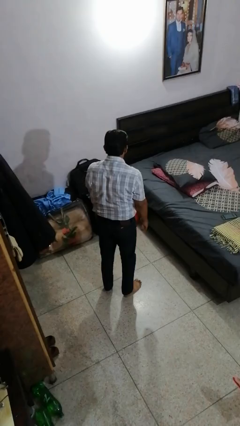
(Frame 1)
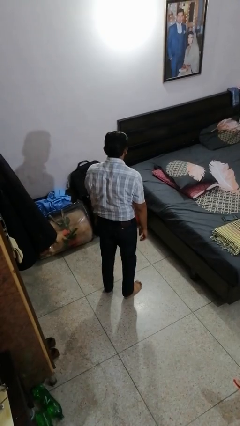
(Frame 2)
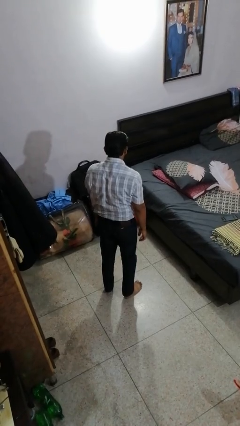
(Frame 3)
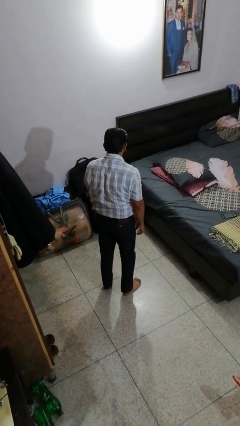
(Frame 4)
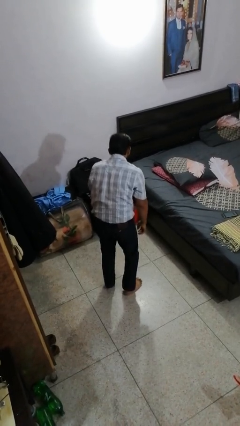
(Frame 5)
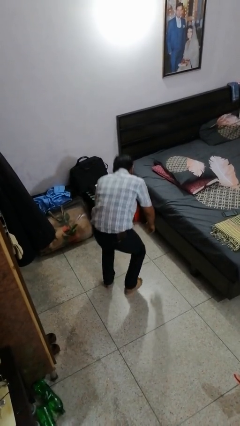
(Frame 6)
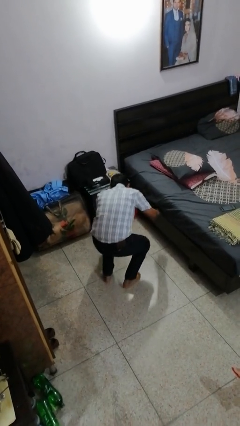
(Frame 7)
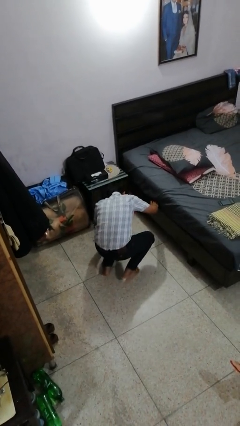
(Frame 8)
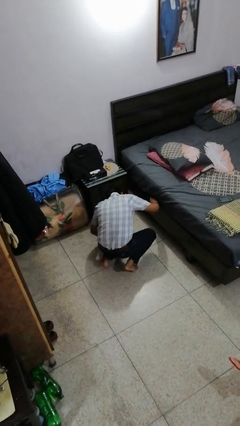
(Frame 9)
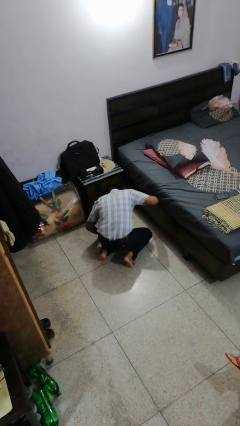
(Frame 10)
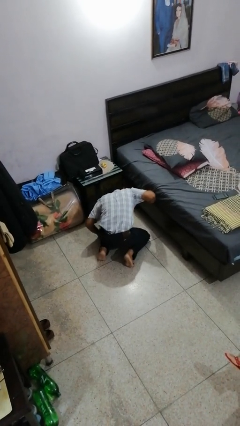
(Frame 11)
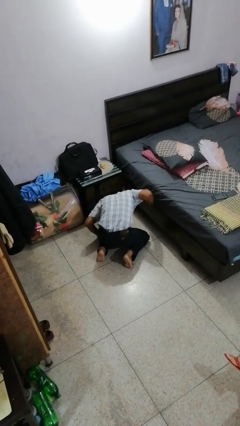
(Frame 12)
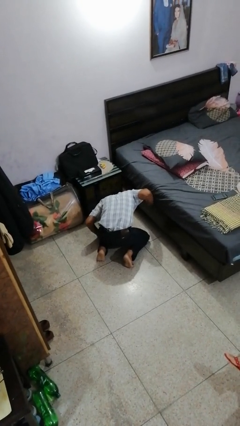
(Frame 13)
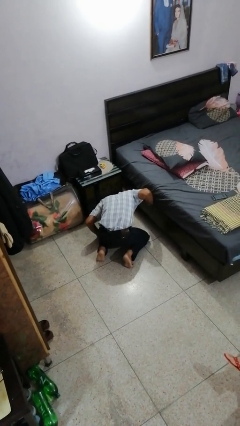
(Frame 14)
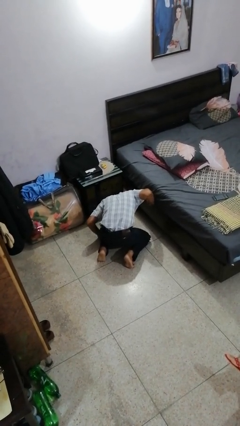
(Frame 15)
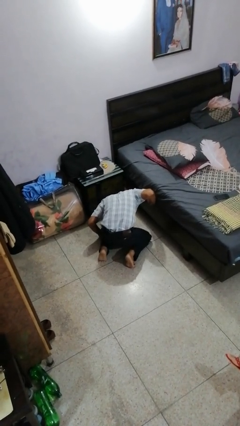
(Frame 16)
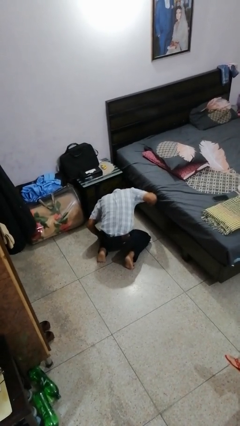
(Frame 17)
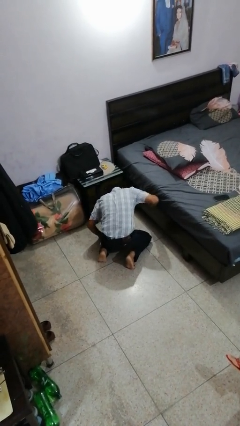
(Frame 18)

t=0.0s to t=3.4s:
person searches under bed

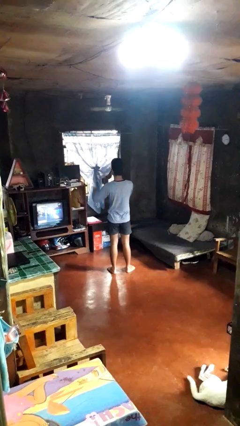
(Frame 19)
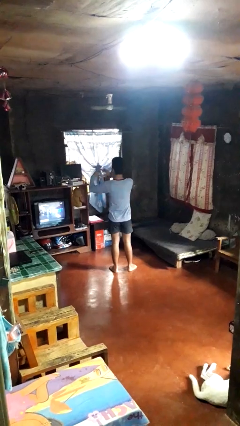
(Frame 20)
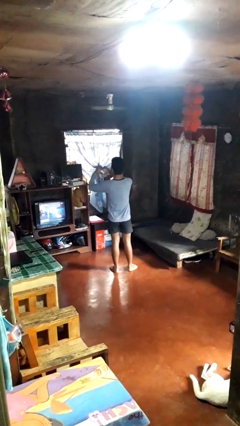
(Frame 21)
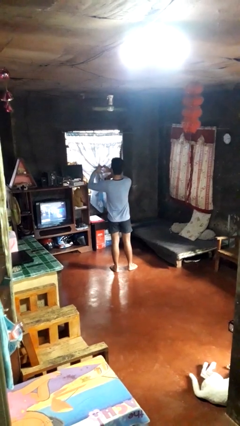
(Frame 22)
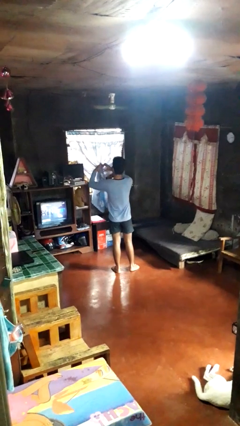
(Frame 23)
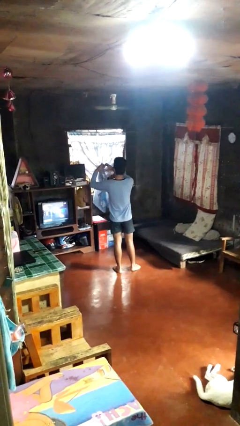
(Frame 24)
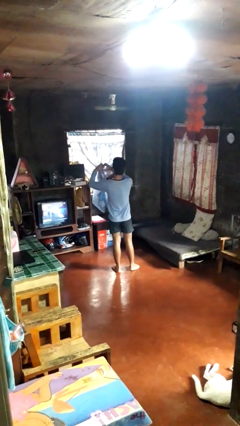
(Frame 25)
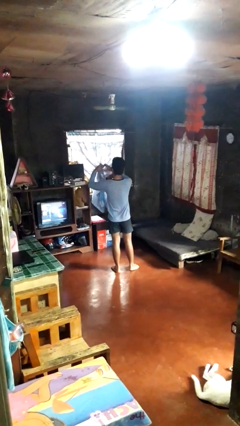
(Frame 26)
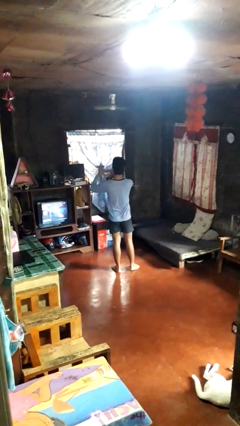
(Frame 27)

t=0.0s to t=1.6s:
person gestures heart

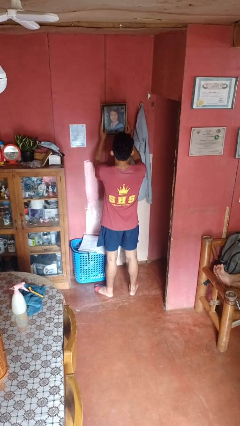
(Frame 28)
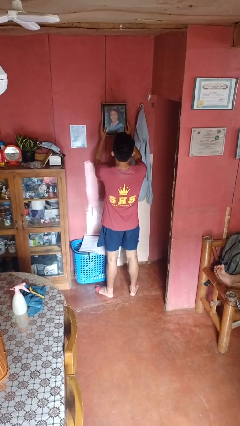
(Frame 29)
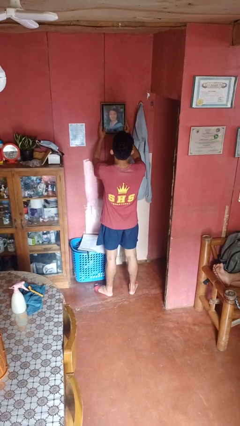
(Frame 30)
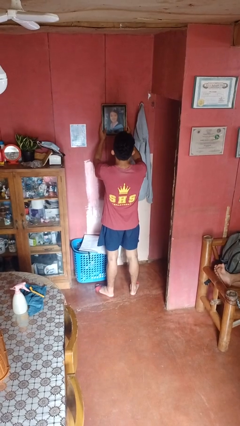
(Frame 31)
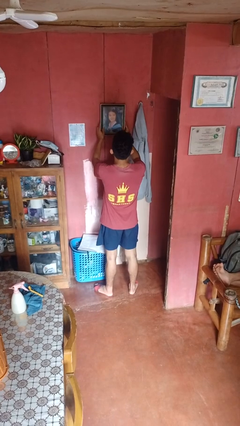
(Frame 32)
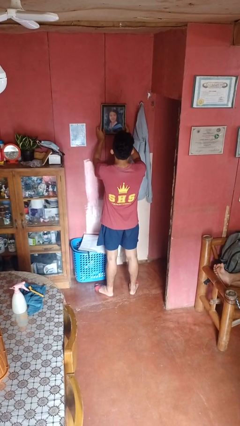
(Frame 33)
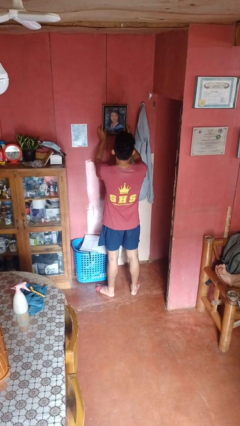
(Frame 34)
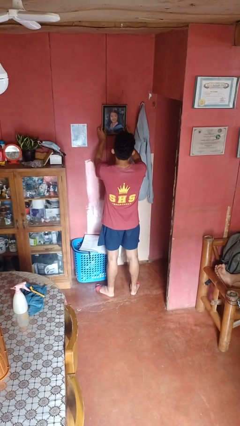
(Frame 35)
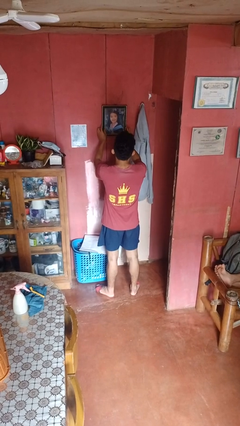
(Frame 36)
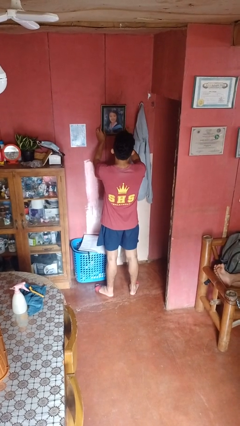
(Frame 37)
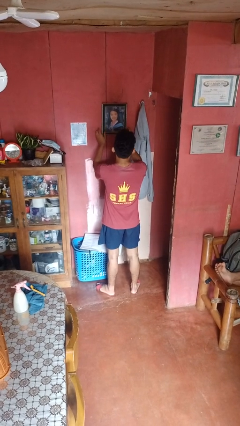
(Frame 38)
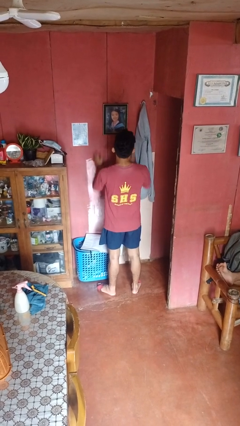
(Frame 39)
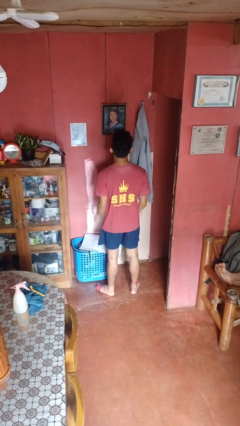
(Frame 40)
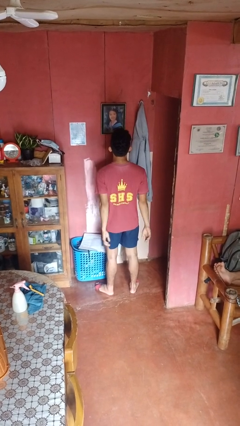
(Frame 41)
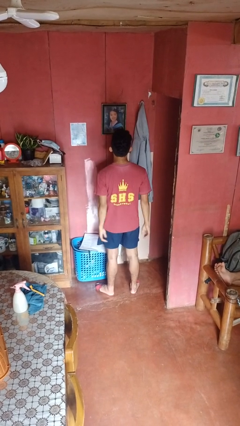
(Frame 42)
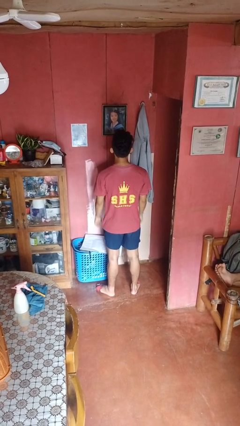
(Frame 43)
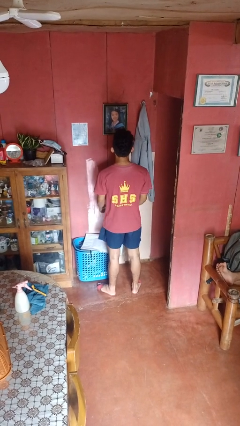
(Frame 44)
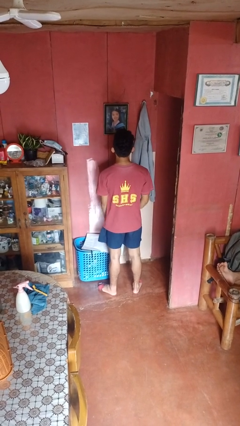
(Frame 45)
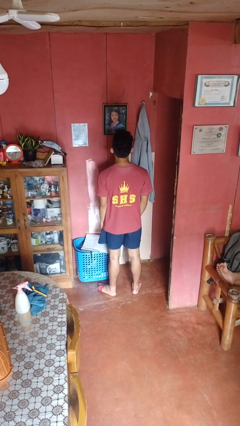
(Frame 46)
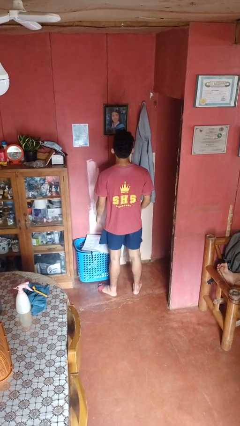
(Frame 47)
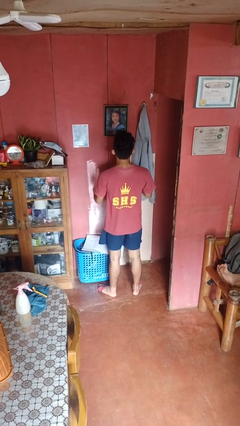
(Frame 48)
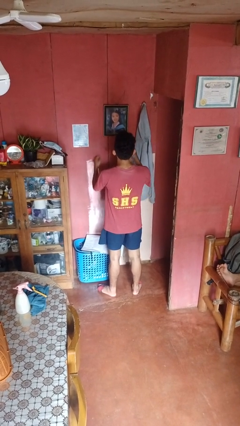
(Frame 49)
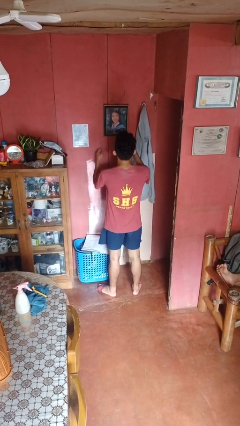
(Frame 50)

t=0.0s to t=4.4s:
person puts up picture frame

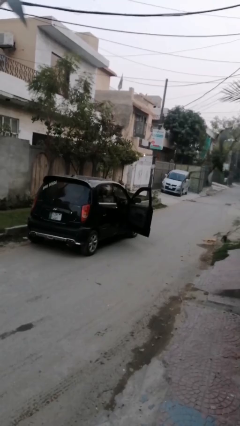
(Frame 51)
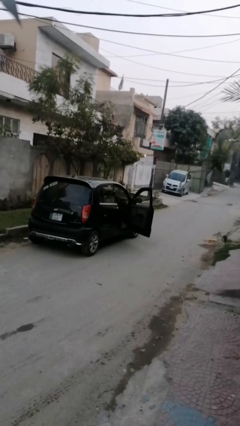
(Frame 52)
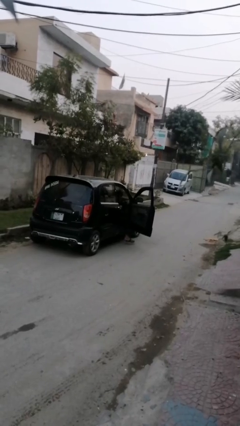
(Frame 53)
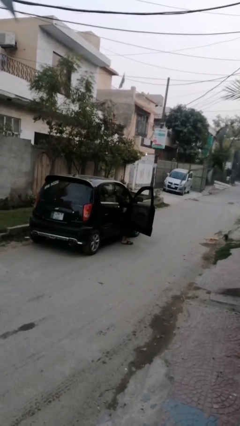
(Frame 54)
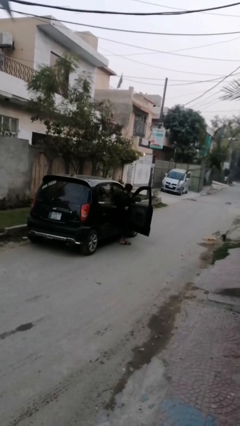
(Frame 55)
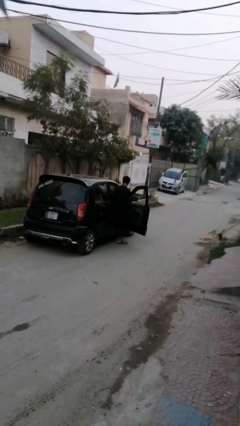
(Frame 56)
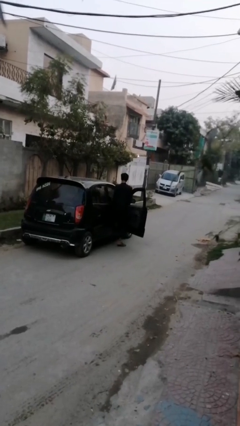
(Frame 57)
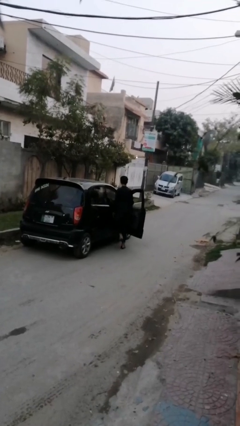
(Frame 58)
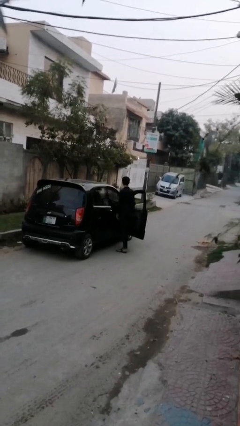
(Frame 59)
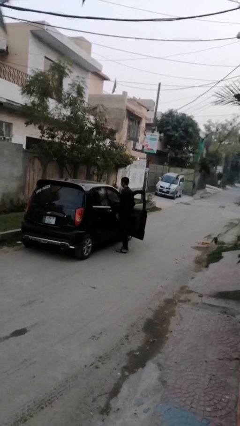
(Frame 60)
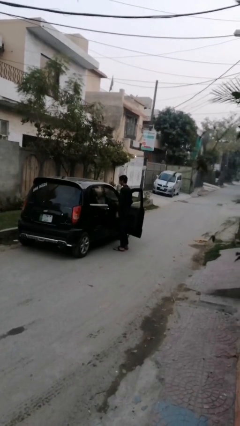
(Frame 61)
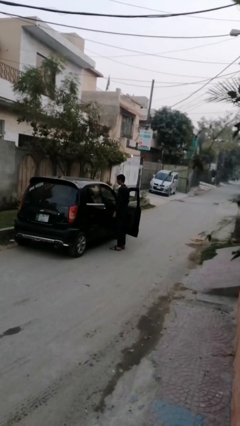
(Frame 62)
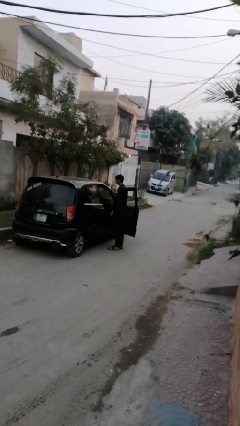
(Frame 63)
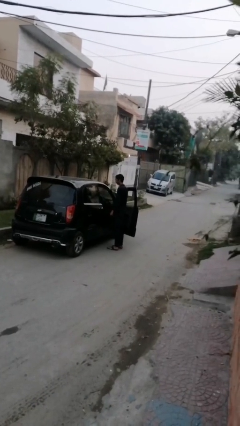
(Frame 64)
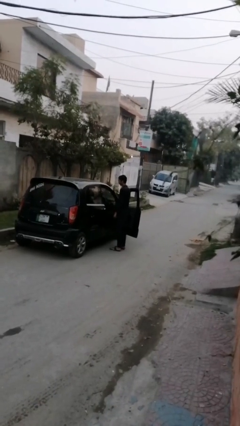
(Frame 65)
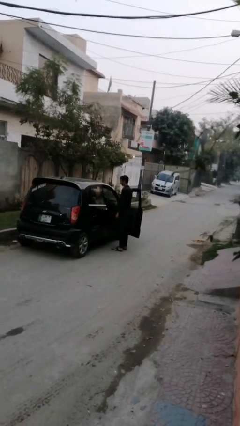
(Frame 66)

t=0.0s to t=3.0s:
person exits car

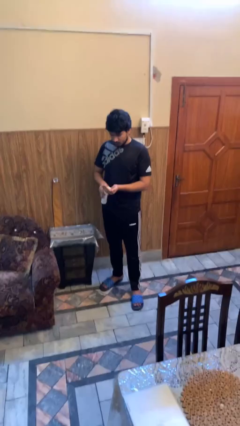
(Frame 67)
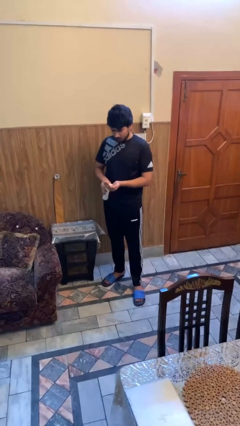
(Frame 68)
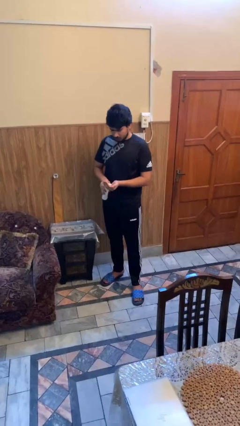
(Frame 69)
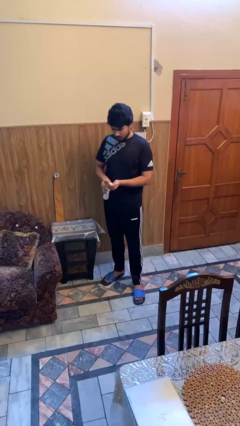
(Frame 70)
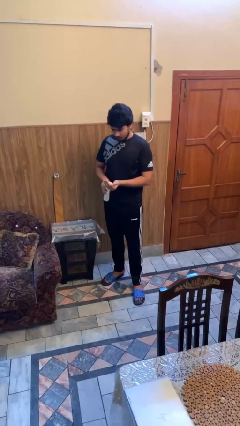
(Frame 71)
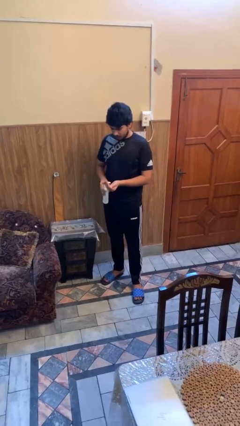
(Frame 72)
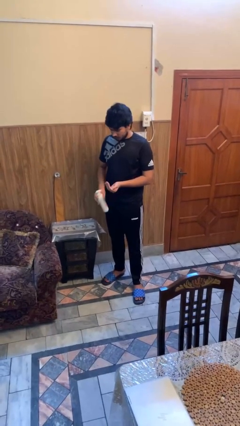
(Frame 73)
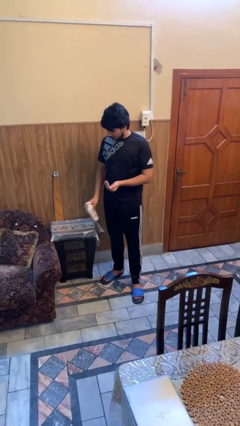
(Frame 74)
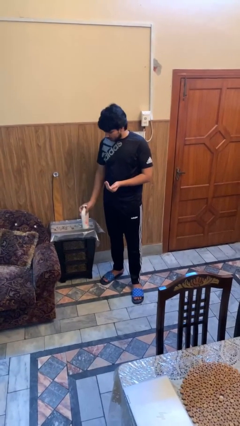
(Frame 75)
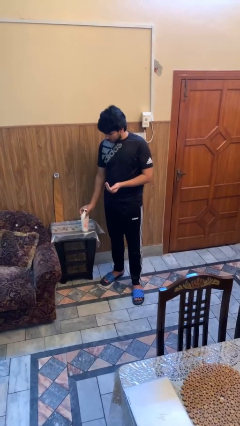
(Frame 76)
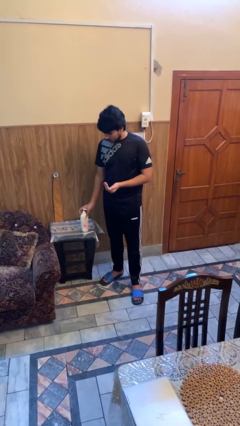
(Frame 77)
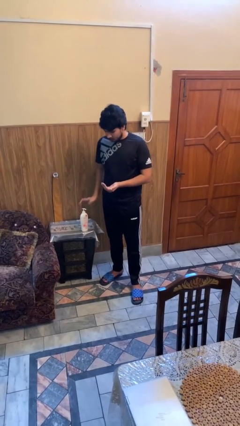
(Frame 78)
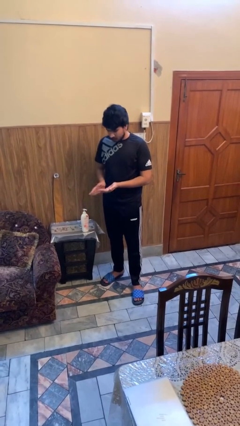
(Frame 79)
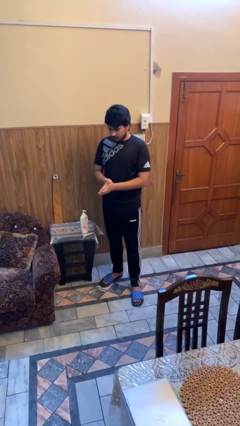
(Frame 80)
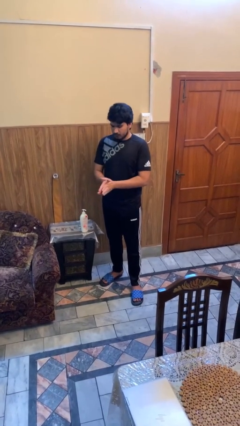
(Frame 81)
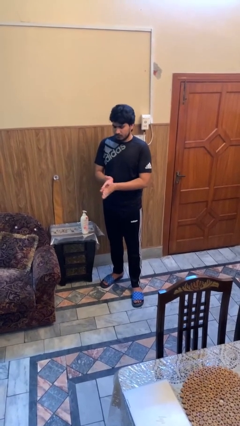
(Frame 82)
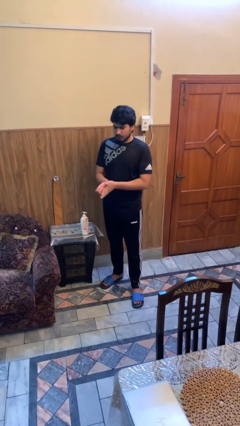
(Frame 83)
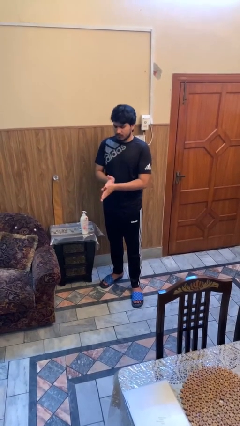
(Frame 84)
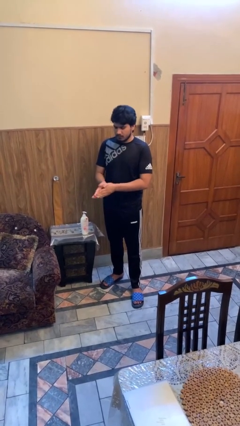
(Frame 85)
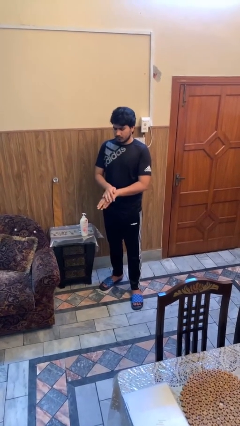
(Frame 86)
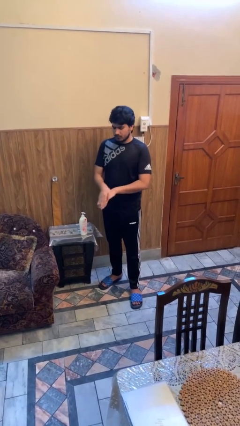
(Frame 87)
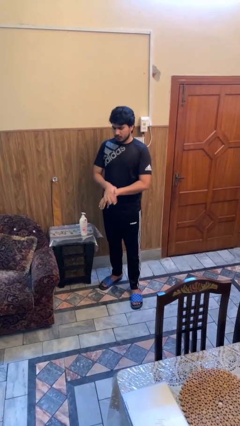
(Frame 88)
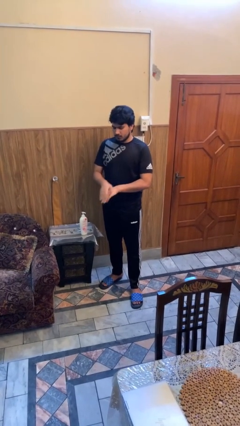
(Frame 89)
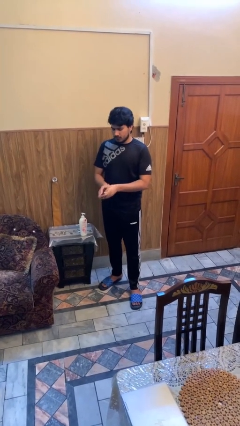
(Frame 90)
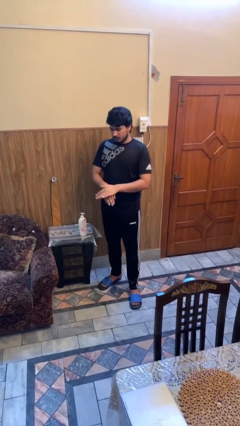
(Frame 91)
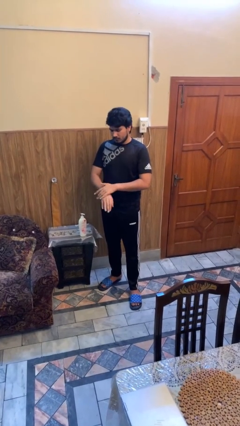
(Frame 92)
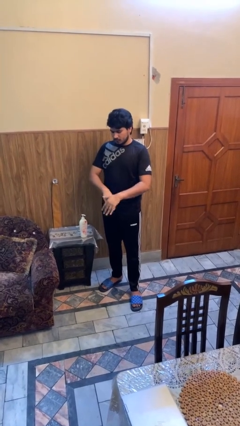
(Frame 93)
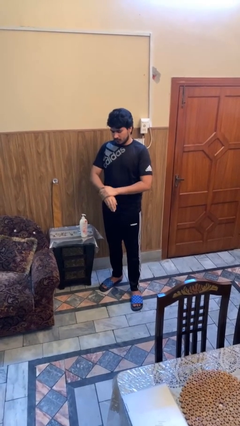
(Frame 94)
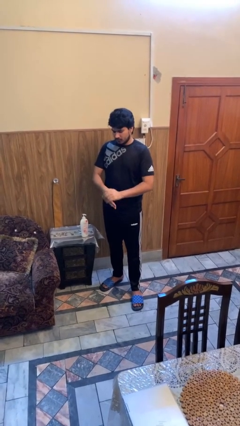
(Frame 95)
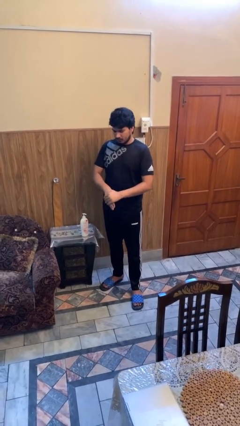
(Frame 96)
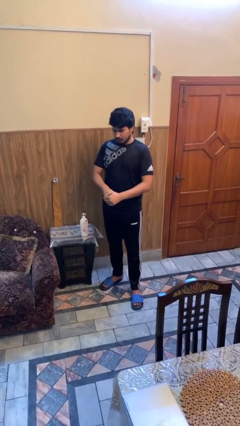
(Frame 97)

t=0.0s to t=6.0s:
person applies sunscreen
